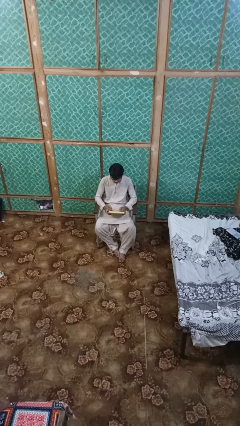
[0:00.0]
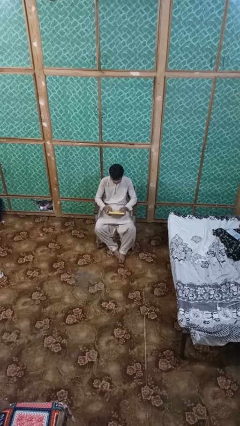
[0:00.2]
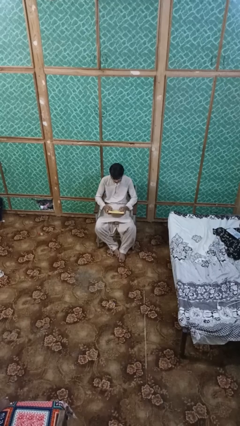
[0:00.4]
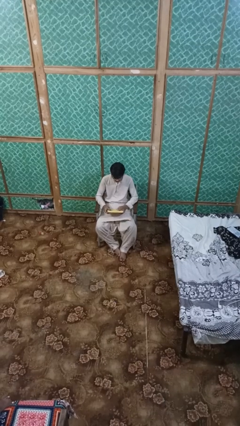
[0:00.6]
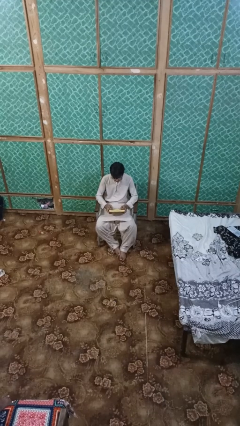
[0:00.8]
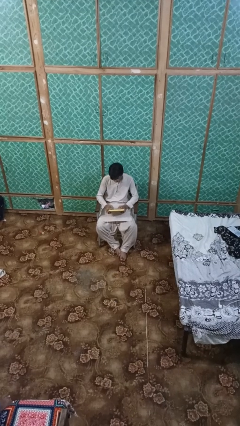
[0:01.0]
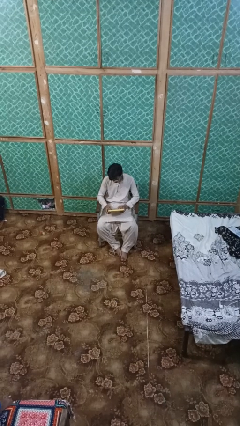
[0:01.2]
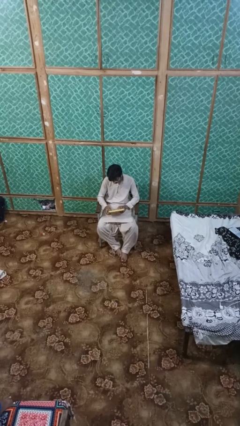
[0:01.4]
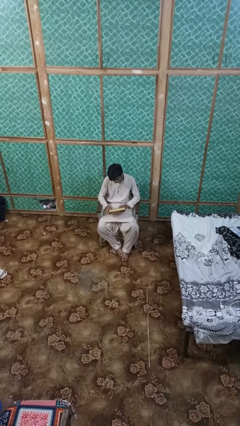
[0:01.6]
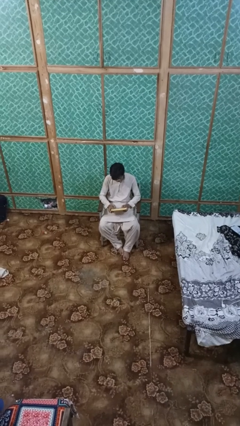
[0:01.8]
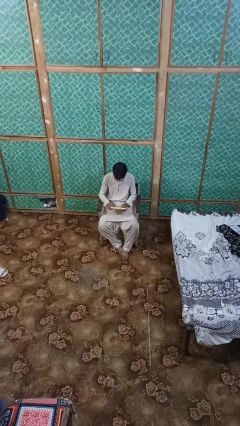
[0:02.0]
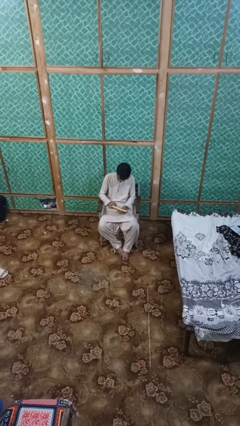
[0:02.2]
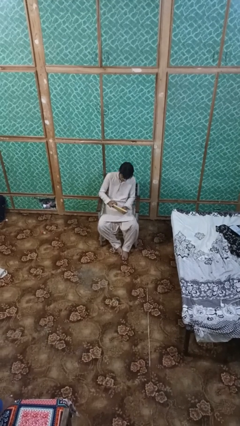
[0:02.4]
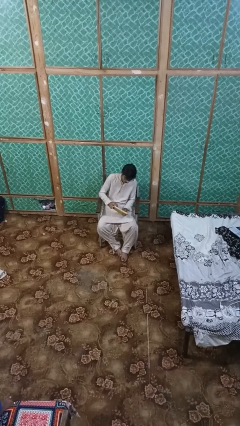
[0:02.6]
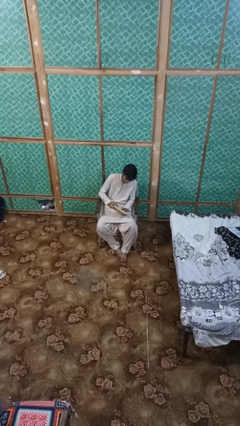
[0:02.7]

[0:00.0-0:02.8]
person interacts with handheld game

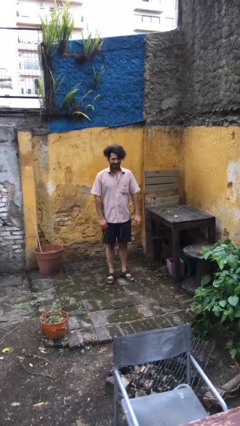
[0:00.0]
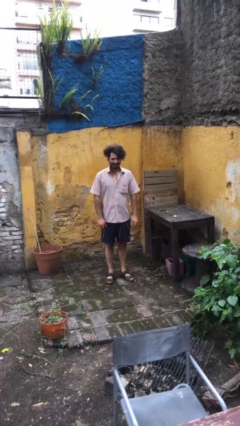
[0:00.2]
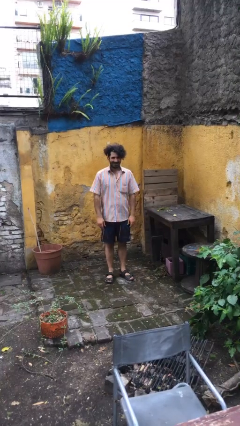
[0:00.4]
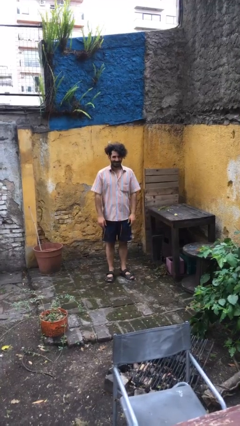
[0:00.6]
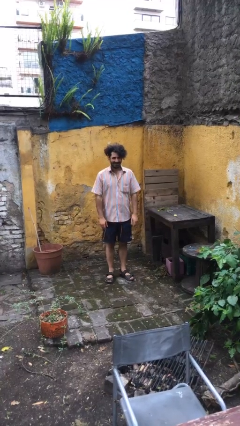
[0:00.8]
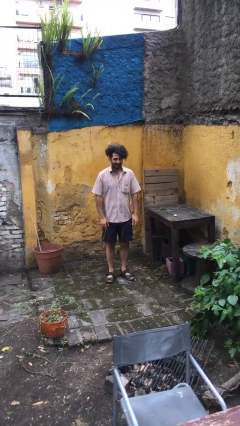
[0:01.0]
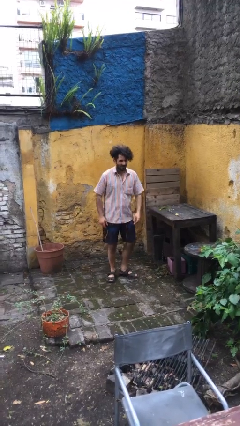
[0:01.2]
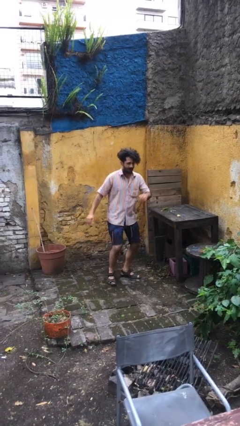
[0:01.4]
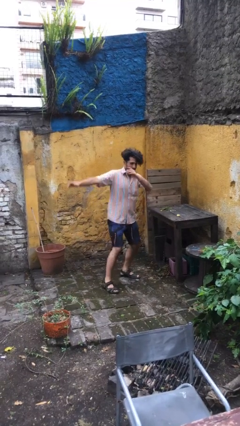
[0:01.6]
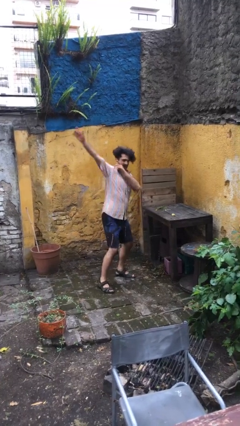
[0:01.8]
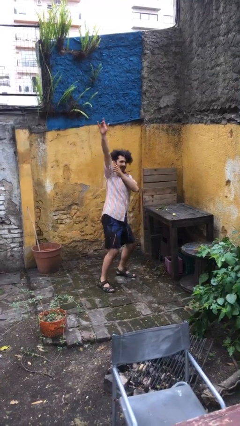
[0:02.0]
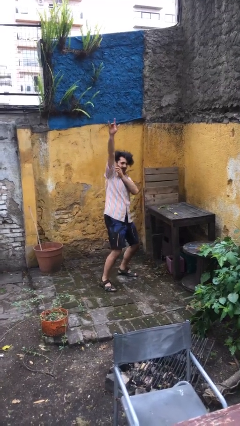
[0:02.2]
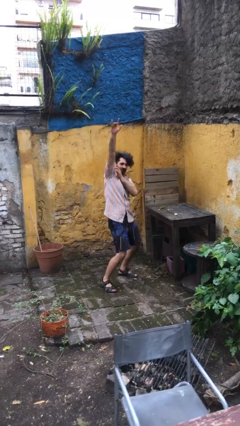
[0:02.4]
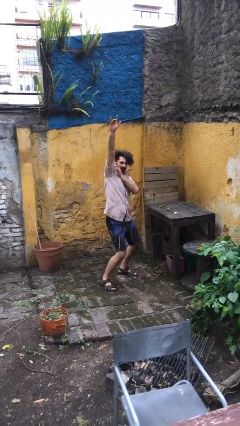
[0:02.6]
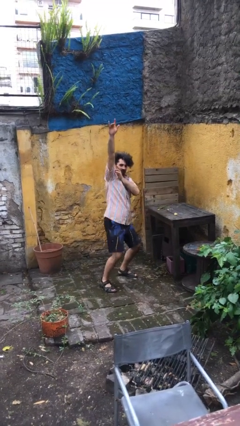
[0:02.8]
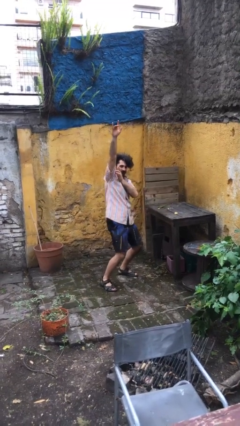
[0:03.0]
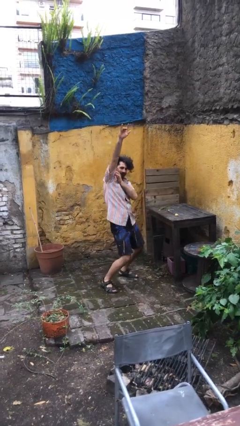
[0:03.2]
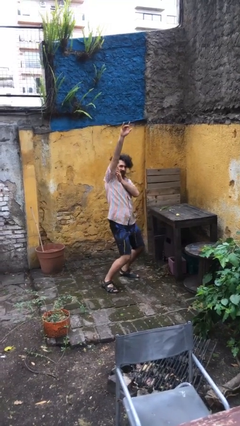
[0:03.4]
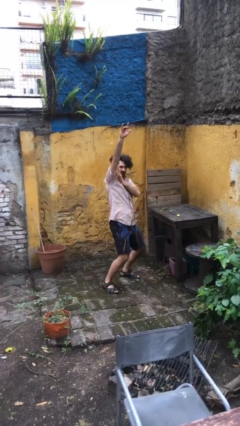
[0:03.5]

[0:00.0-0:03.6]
person dances in place

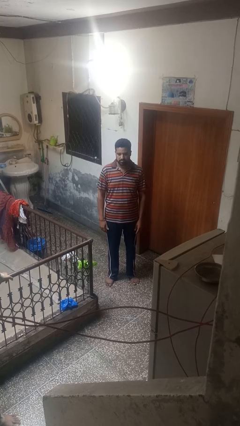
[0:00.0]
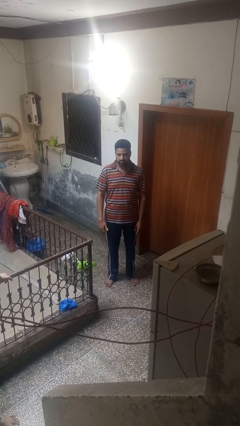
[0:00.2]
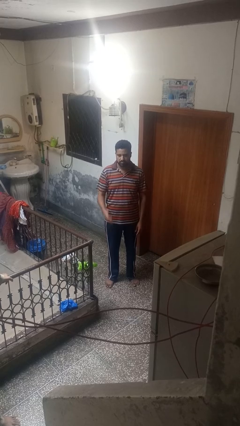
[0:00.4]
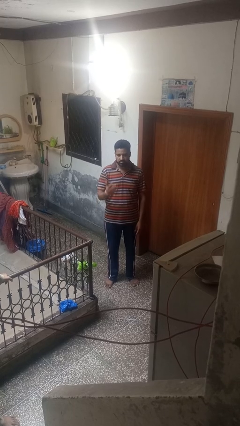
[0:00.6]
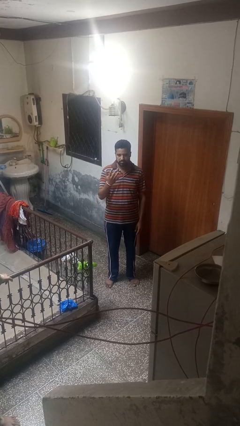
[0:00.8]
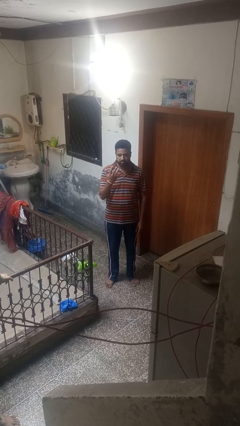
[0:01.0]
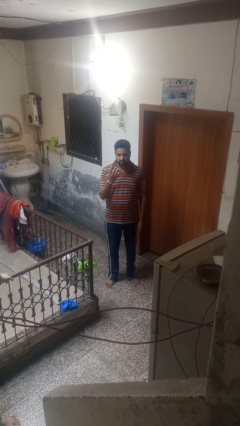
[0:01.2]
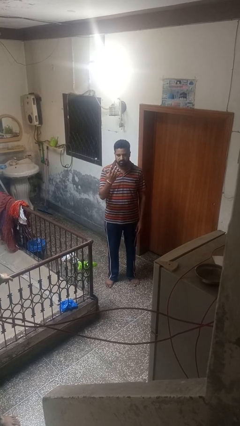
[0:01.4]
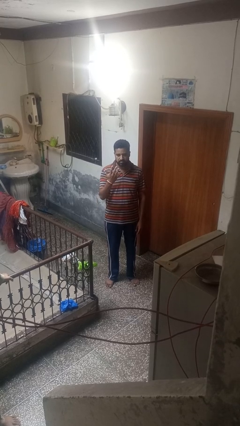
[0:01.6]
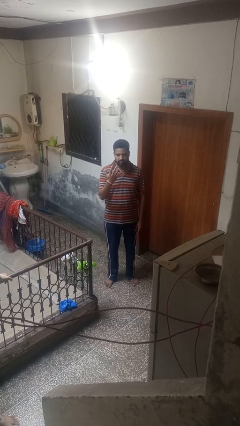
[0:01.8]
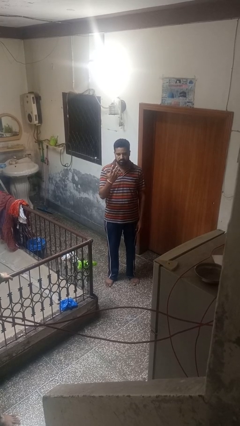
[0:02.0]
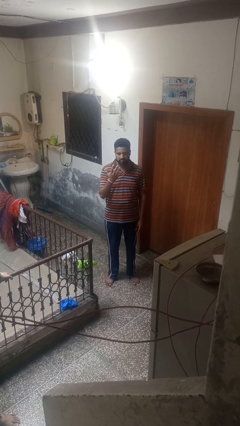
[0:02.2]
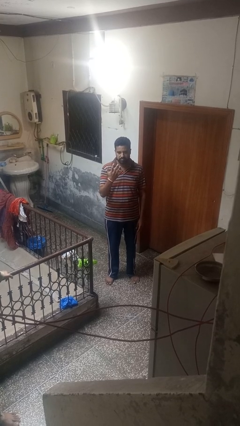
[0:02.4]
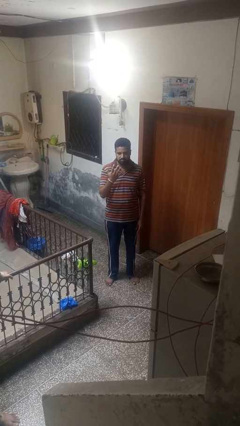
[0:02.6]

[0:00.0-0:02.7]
person gestures number five

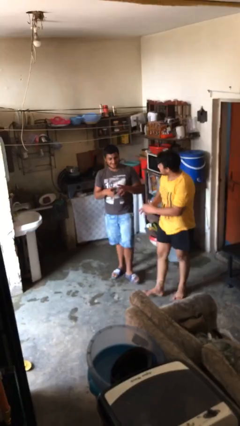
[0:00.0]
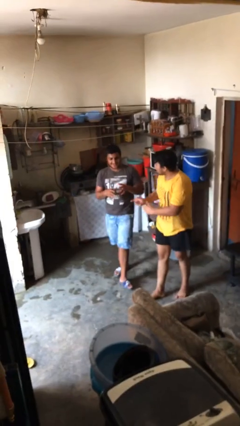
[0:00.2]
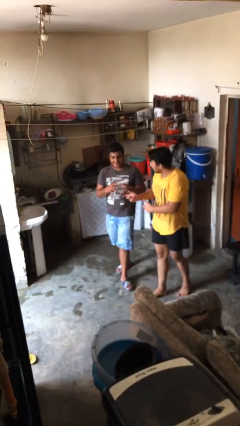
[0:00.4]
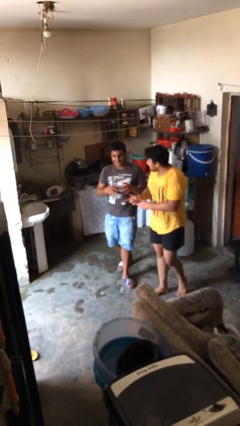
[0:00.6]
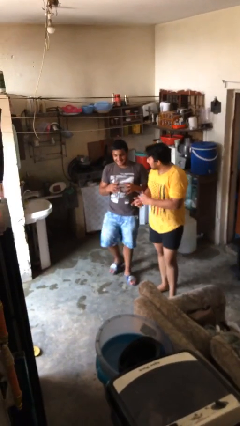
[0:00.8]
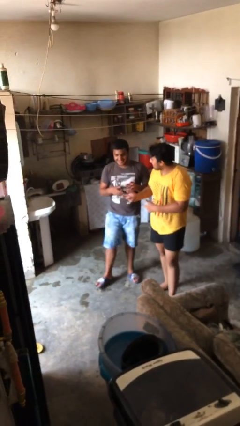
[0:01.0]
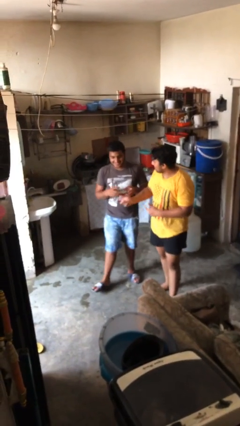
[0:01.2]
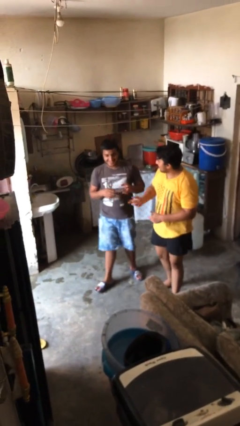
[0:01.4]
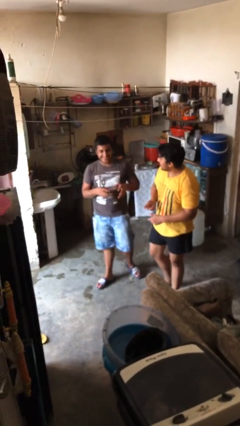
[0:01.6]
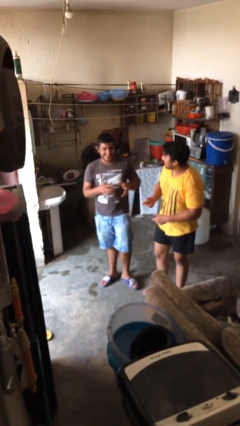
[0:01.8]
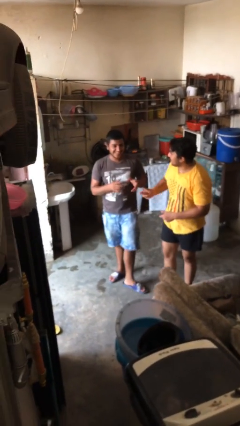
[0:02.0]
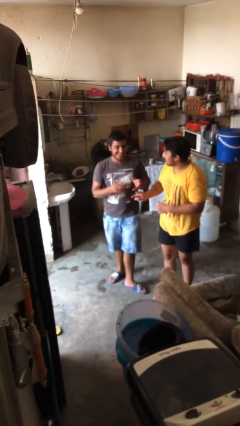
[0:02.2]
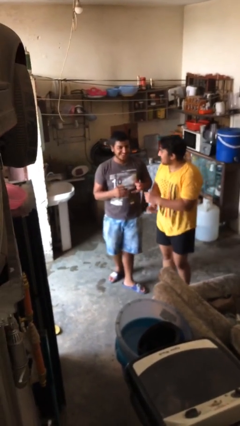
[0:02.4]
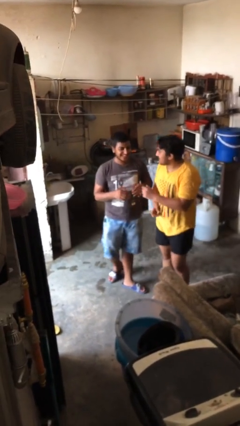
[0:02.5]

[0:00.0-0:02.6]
person talks to person

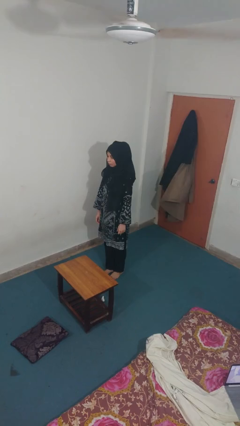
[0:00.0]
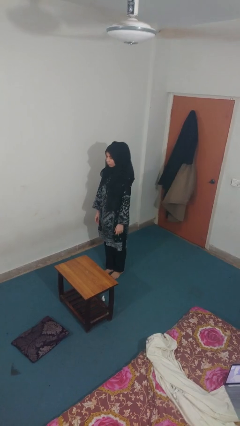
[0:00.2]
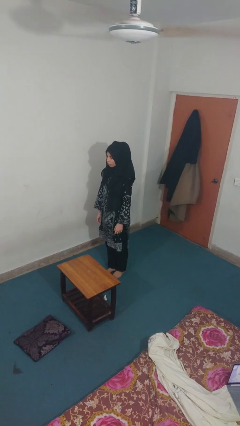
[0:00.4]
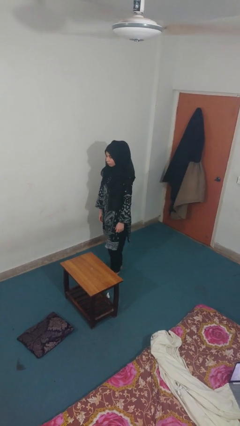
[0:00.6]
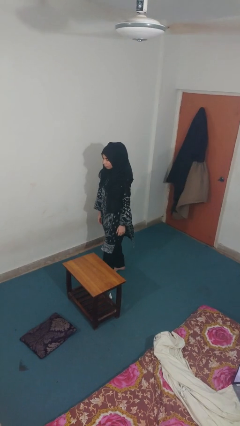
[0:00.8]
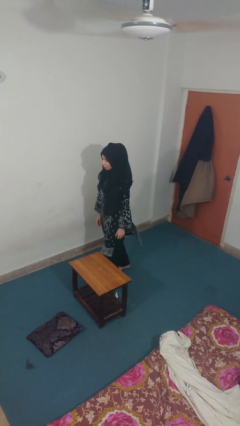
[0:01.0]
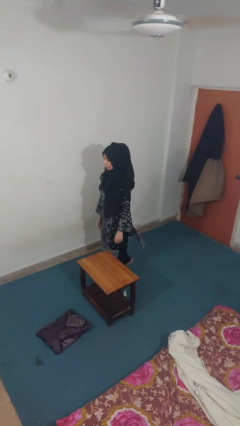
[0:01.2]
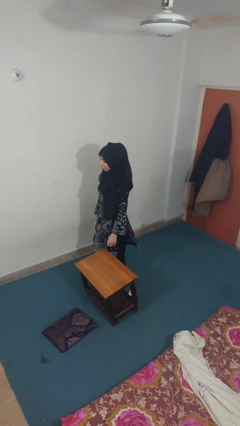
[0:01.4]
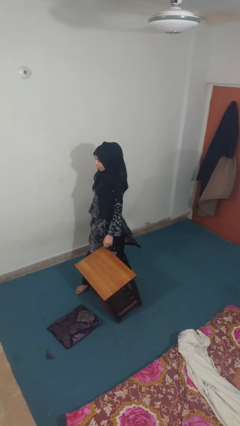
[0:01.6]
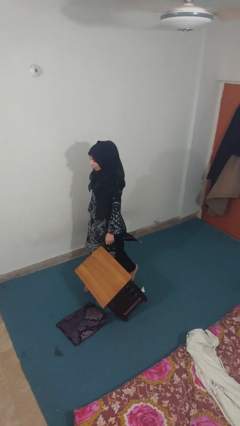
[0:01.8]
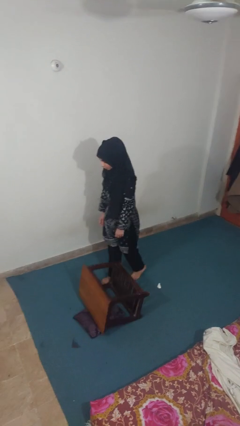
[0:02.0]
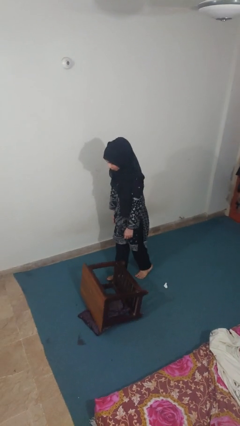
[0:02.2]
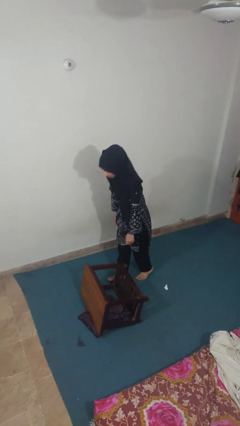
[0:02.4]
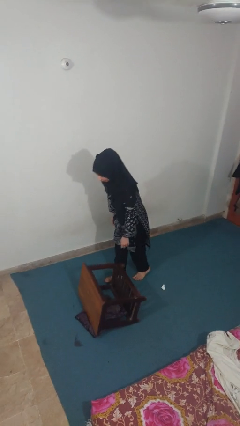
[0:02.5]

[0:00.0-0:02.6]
person knocks over furniture

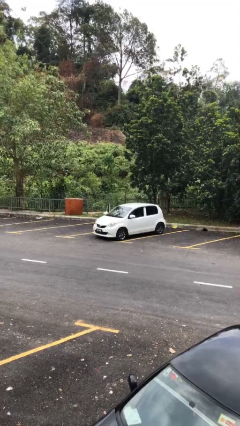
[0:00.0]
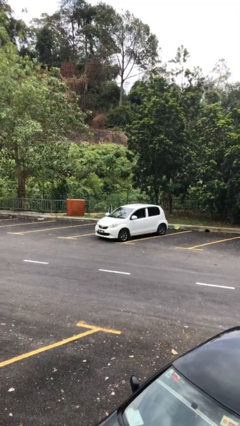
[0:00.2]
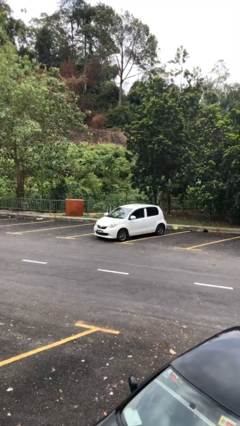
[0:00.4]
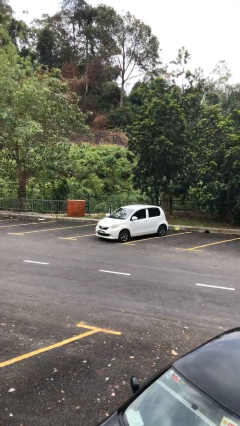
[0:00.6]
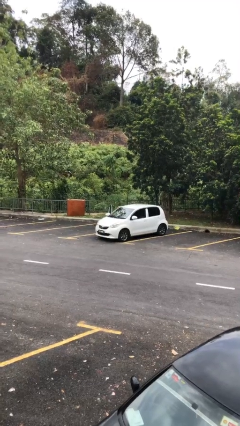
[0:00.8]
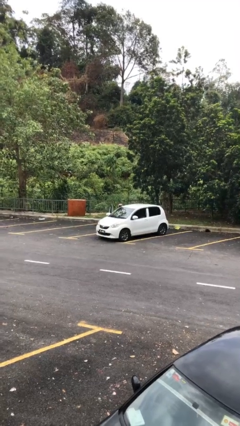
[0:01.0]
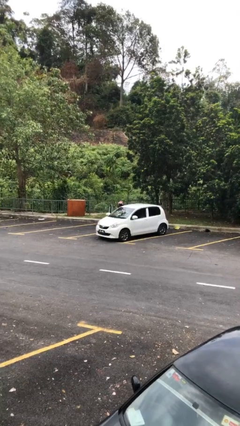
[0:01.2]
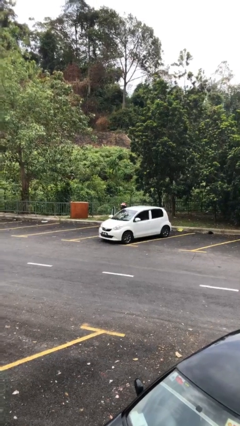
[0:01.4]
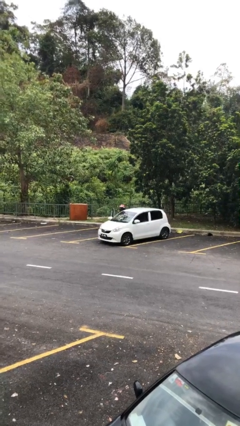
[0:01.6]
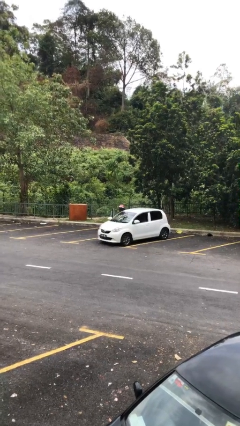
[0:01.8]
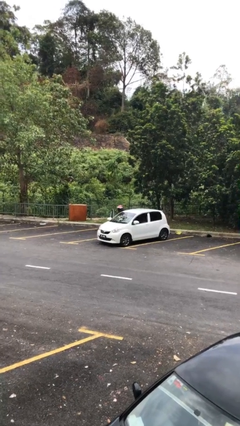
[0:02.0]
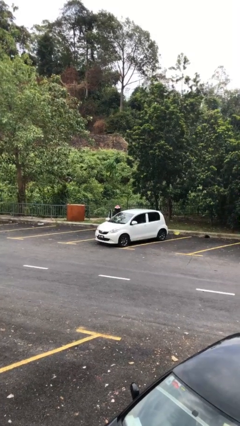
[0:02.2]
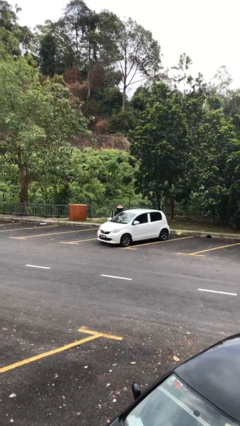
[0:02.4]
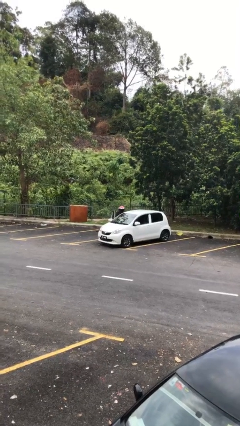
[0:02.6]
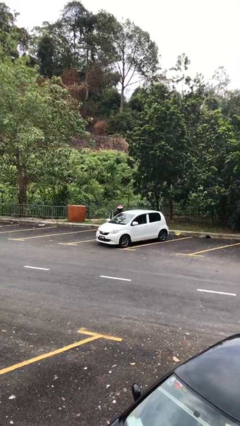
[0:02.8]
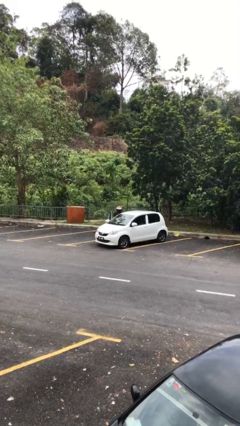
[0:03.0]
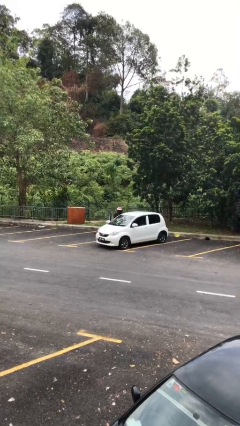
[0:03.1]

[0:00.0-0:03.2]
person exits car
